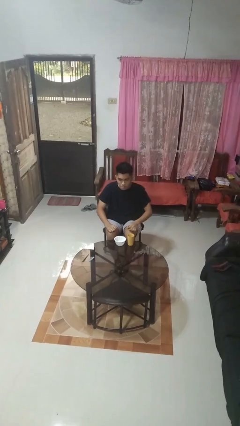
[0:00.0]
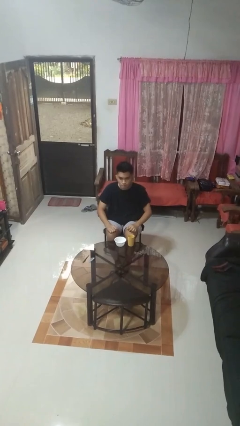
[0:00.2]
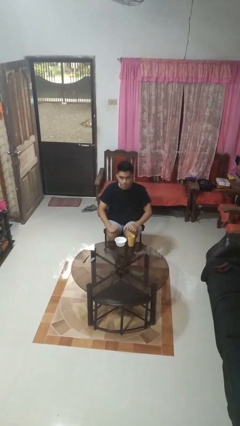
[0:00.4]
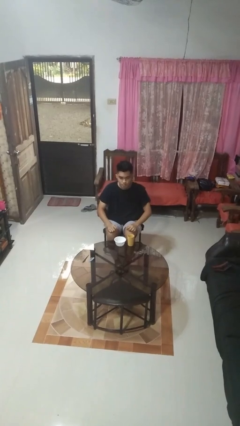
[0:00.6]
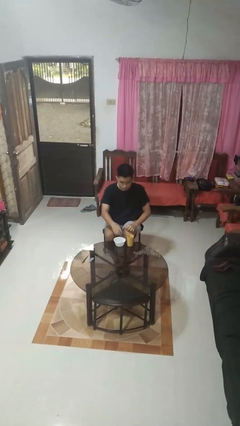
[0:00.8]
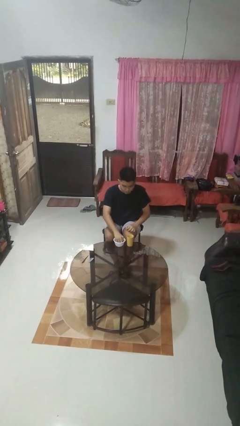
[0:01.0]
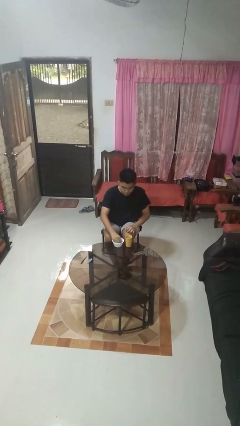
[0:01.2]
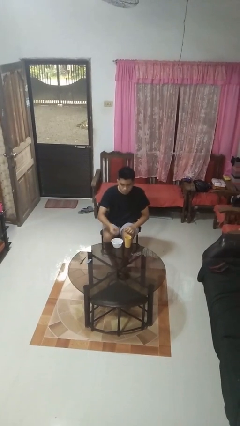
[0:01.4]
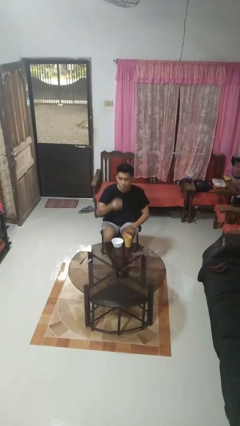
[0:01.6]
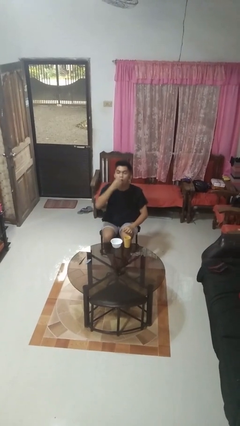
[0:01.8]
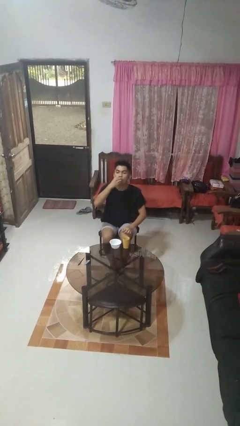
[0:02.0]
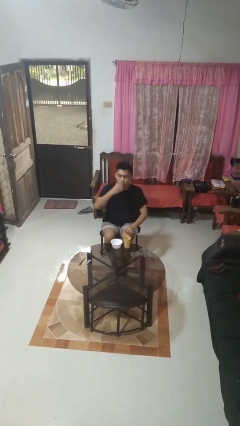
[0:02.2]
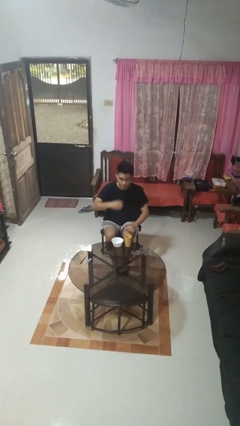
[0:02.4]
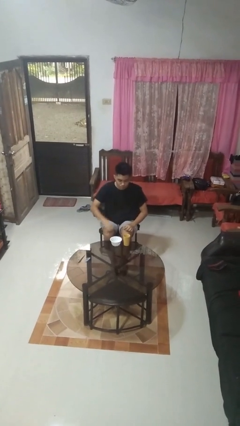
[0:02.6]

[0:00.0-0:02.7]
person takes medicine pills

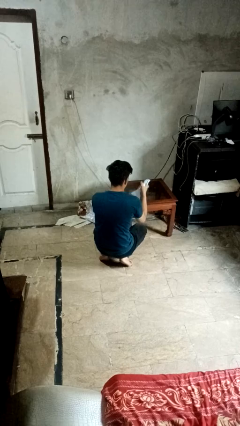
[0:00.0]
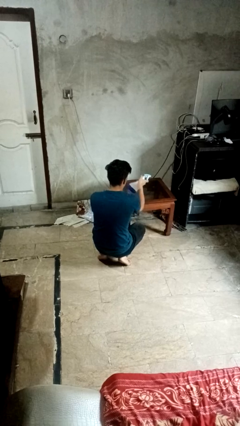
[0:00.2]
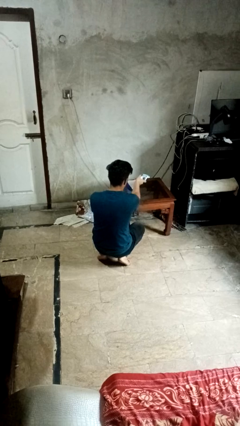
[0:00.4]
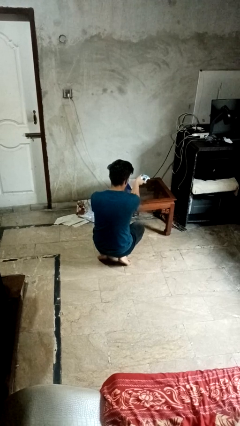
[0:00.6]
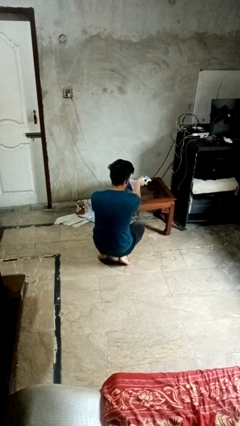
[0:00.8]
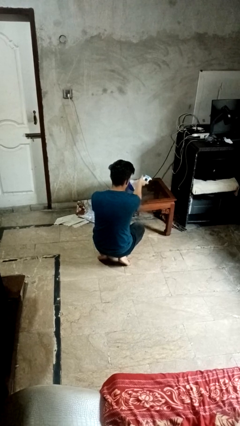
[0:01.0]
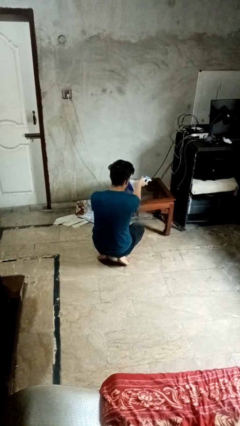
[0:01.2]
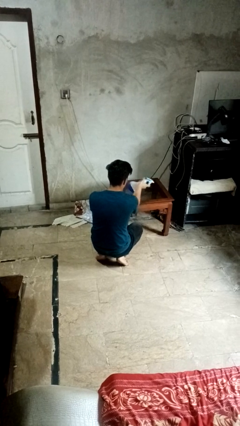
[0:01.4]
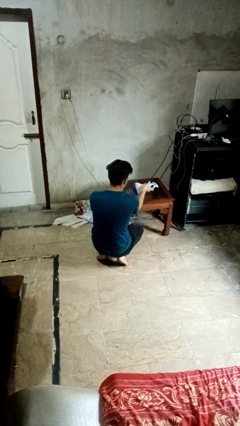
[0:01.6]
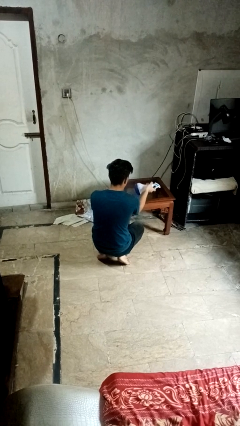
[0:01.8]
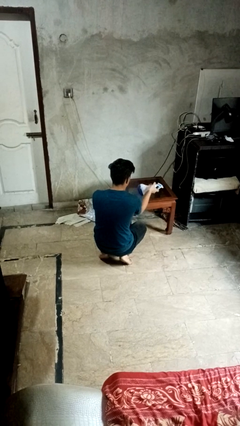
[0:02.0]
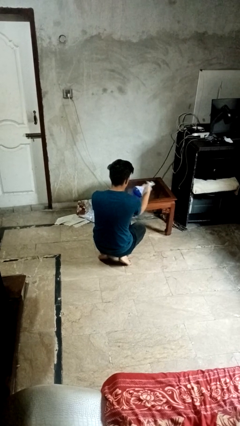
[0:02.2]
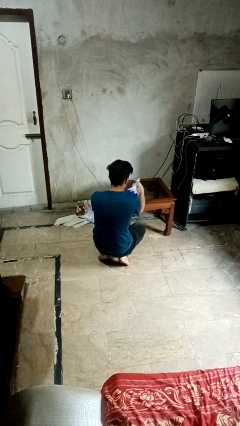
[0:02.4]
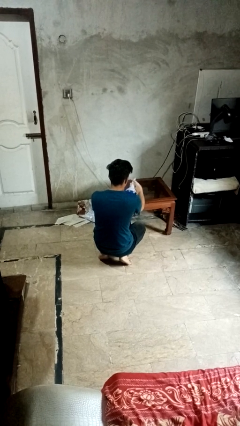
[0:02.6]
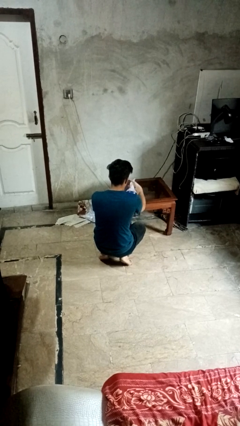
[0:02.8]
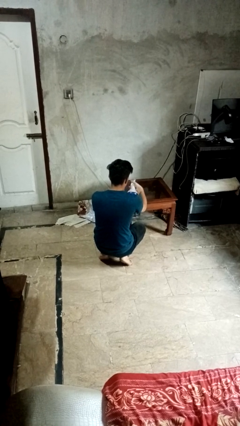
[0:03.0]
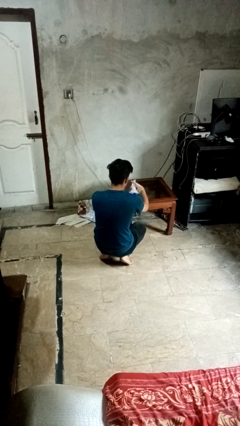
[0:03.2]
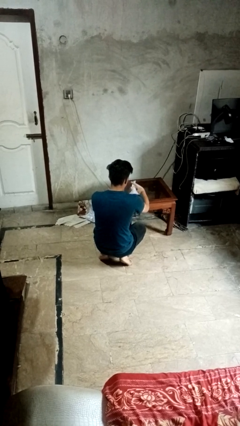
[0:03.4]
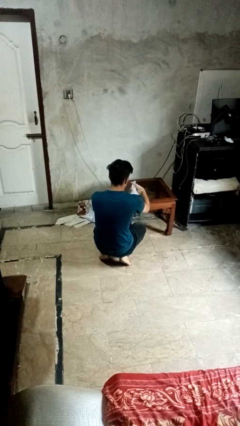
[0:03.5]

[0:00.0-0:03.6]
person sprays from bottle

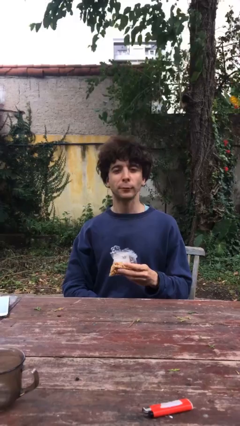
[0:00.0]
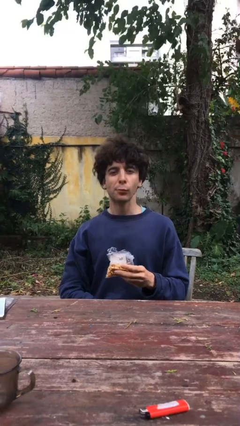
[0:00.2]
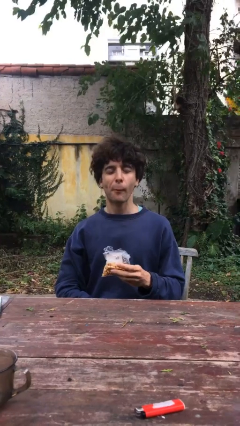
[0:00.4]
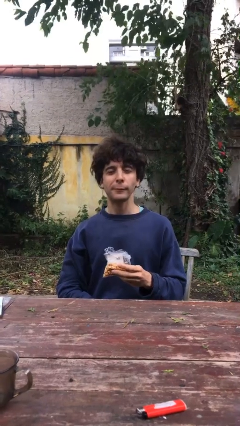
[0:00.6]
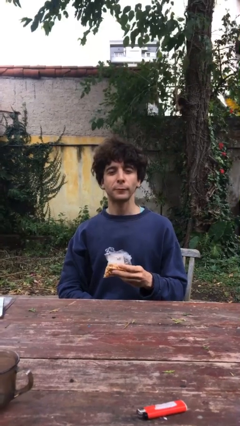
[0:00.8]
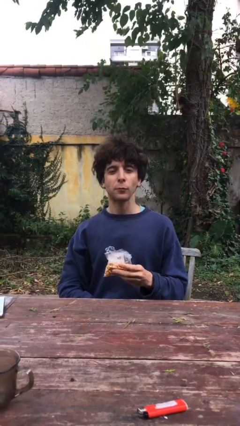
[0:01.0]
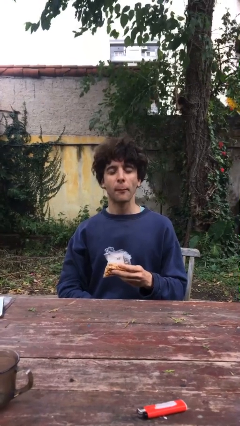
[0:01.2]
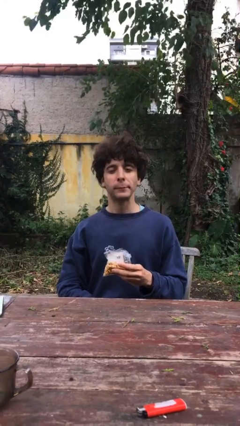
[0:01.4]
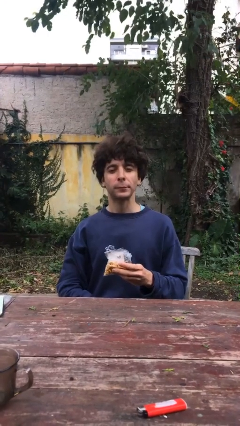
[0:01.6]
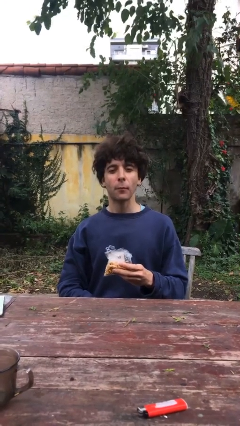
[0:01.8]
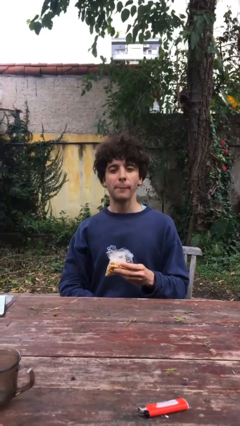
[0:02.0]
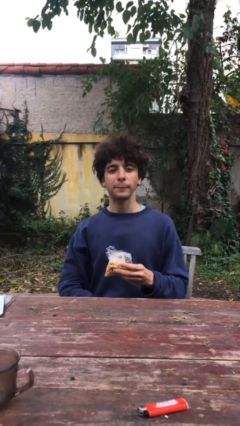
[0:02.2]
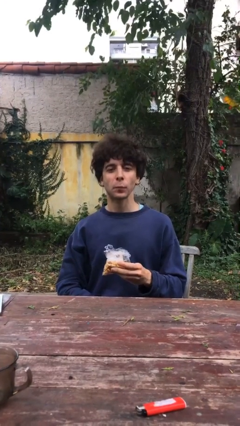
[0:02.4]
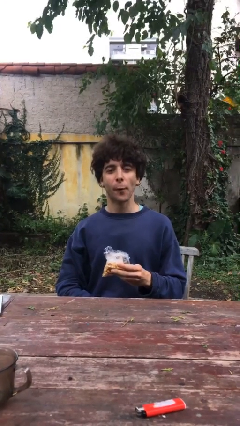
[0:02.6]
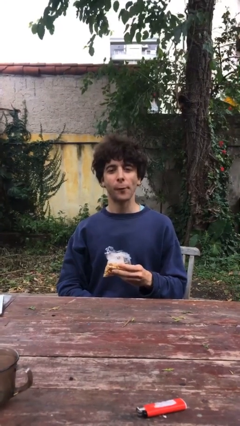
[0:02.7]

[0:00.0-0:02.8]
person eats snack from bag

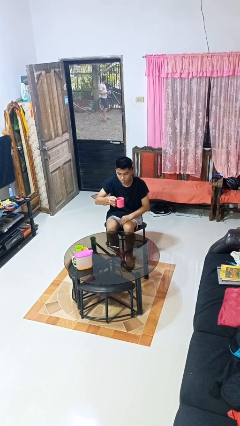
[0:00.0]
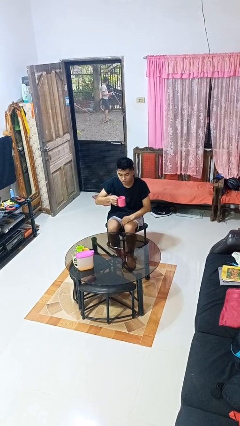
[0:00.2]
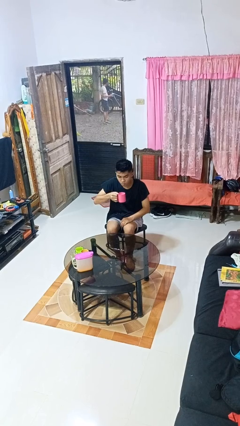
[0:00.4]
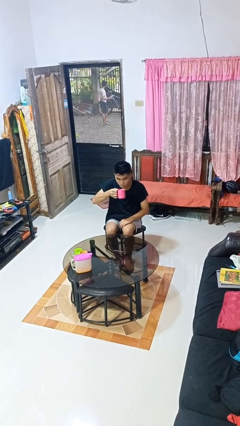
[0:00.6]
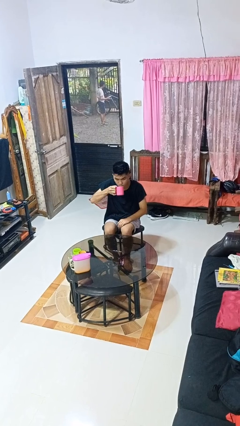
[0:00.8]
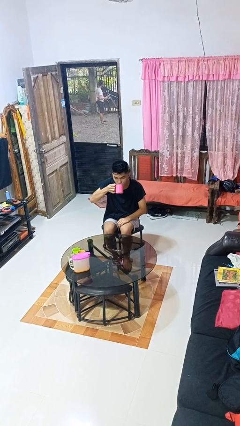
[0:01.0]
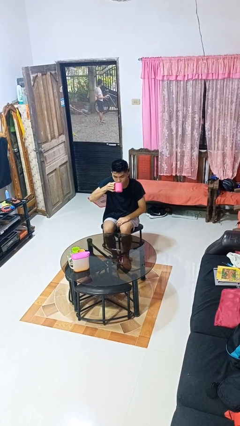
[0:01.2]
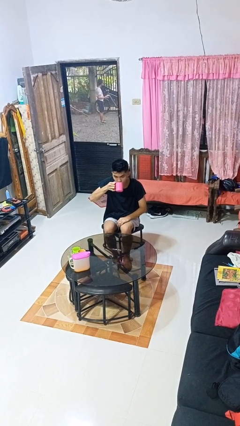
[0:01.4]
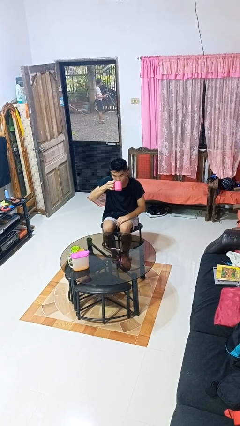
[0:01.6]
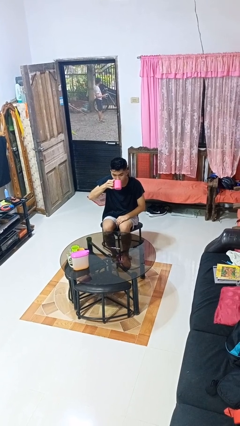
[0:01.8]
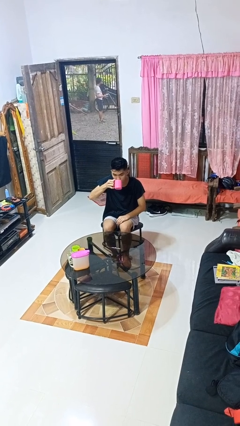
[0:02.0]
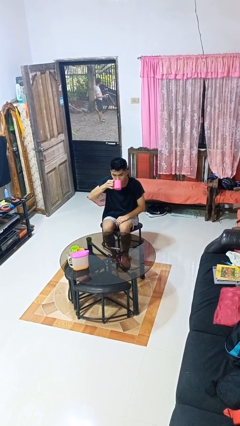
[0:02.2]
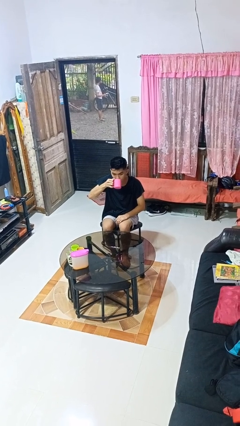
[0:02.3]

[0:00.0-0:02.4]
person drinks from mug

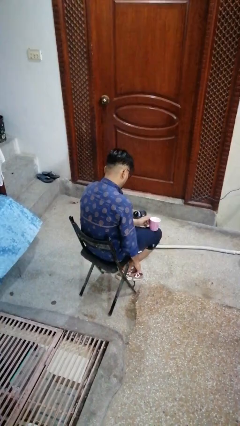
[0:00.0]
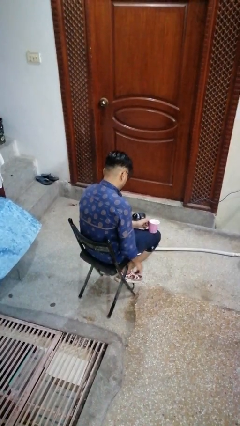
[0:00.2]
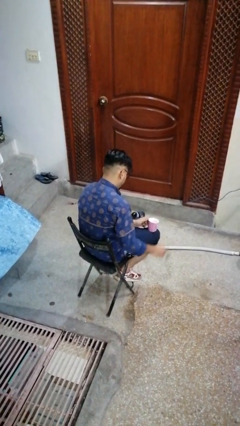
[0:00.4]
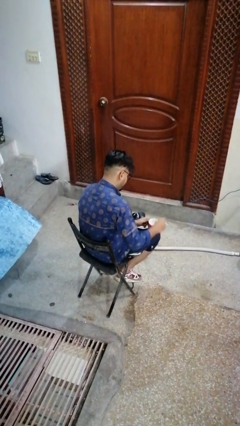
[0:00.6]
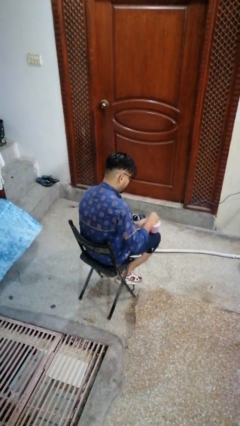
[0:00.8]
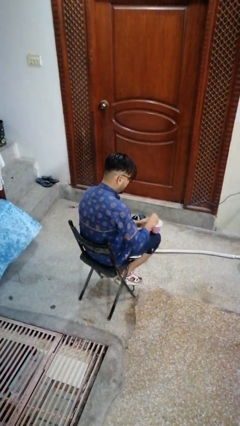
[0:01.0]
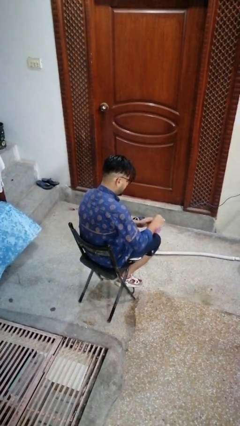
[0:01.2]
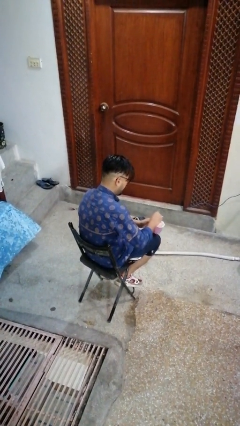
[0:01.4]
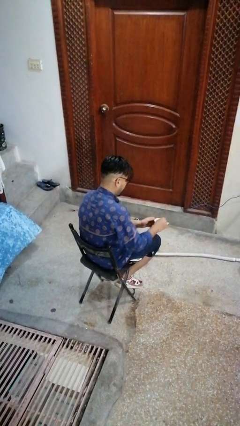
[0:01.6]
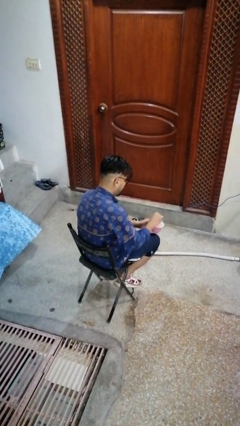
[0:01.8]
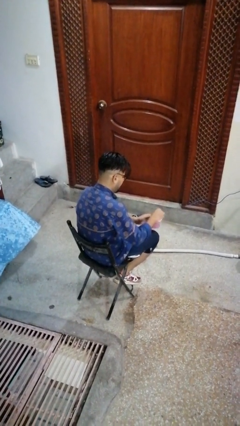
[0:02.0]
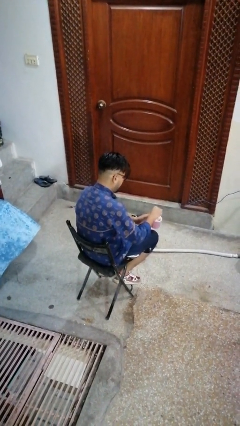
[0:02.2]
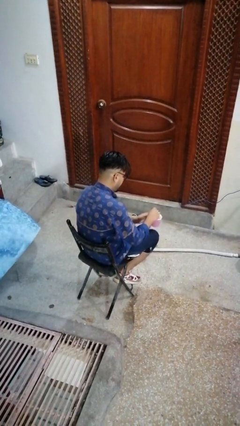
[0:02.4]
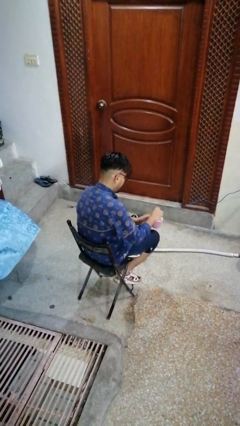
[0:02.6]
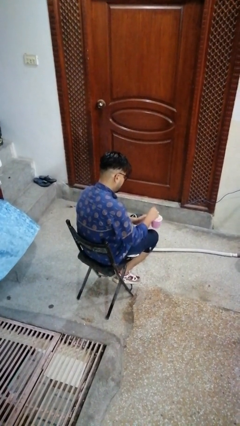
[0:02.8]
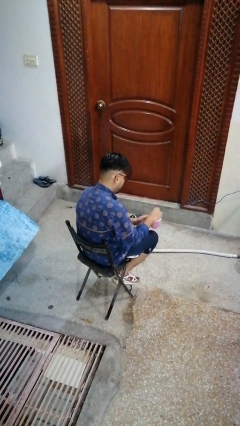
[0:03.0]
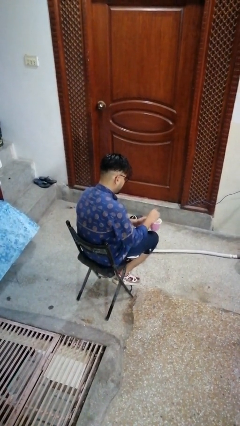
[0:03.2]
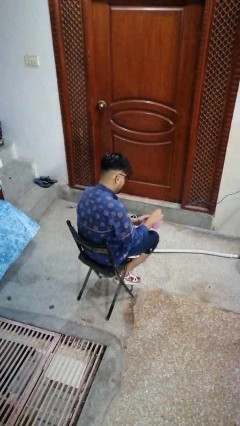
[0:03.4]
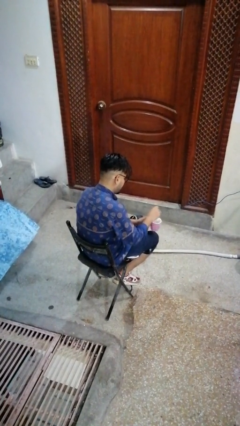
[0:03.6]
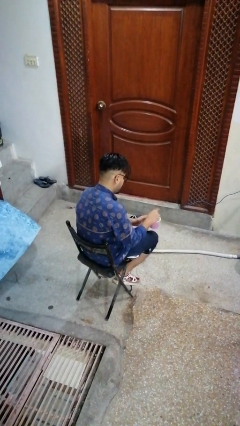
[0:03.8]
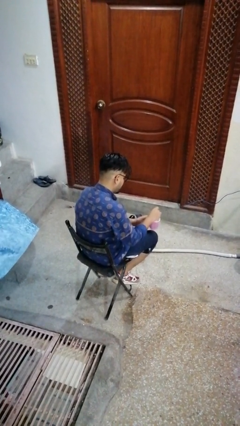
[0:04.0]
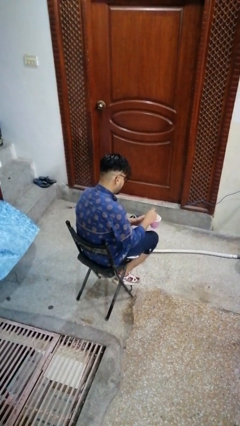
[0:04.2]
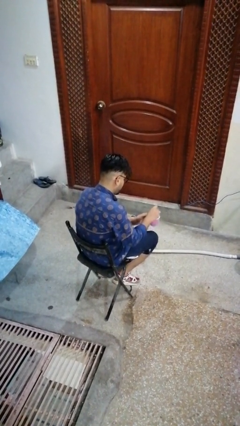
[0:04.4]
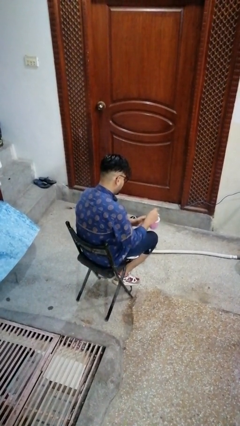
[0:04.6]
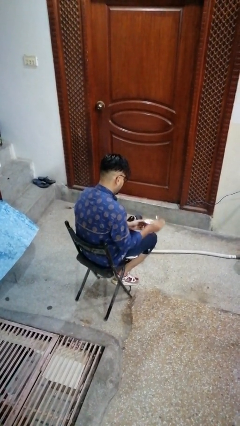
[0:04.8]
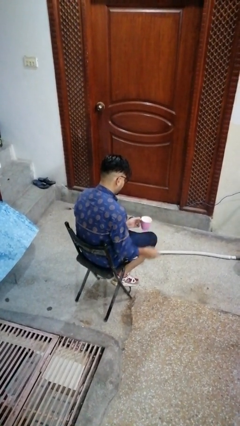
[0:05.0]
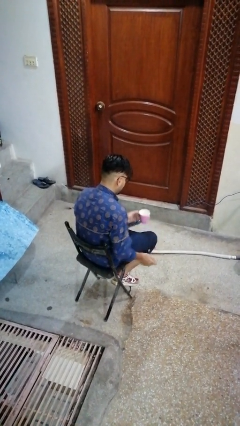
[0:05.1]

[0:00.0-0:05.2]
person stirs mug

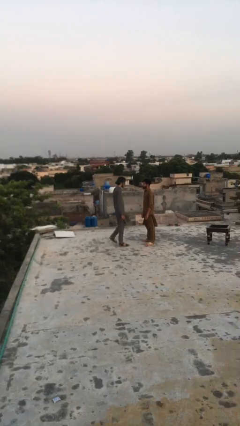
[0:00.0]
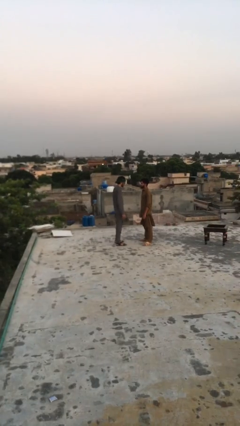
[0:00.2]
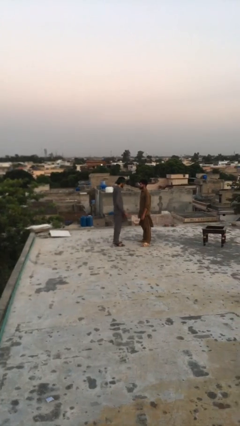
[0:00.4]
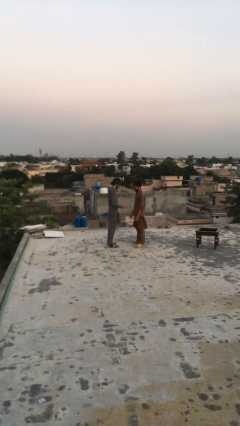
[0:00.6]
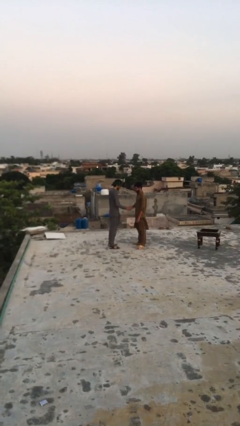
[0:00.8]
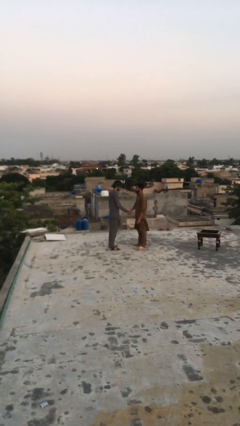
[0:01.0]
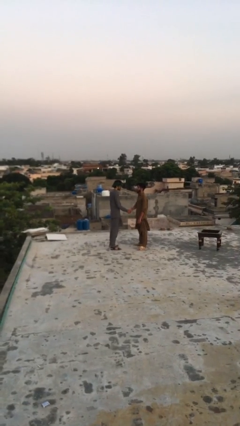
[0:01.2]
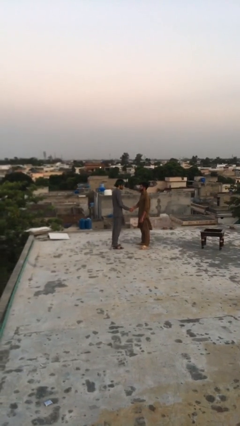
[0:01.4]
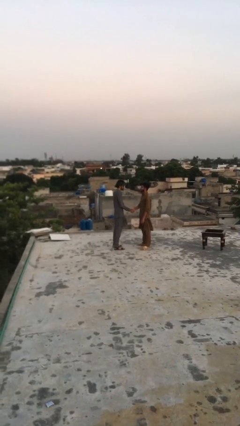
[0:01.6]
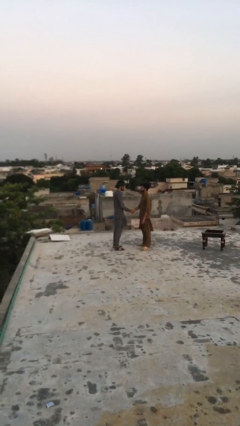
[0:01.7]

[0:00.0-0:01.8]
person shakes hand
